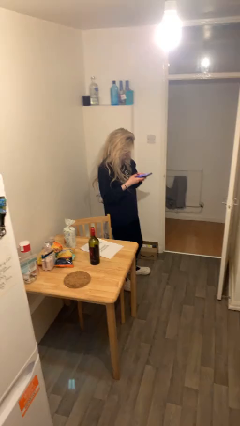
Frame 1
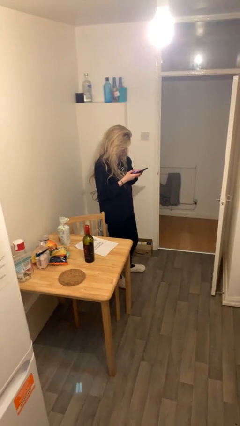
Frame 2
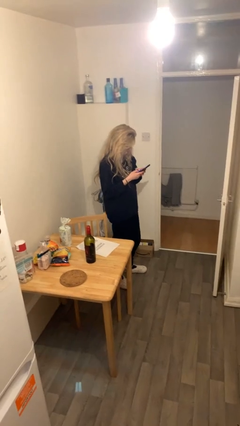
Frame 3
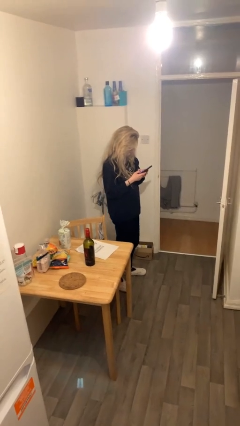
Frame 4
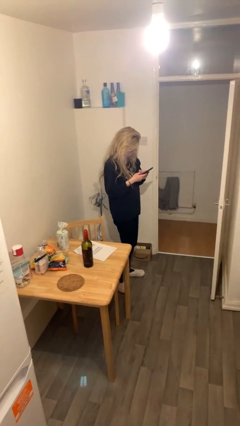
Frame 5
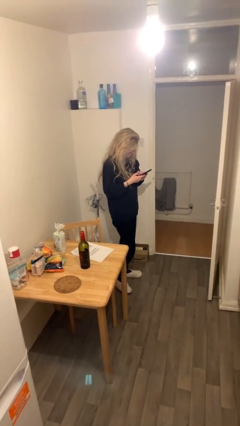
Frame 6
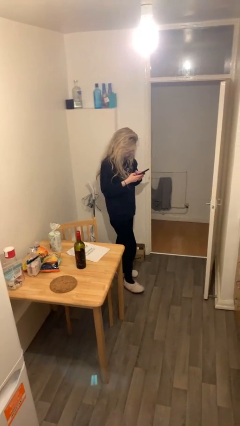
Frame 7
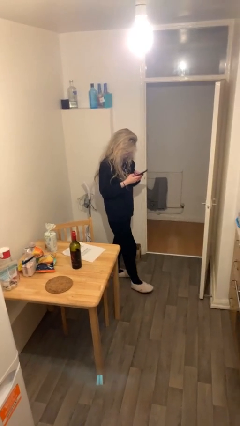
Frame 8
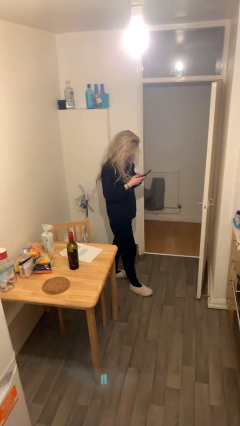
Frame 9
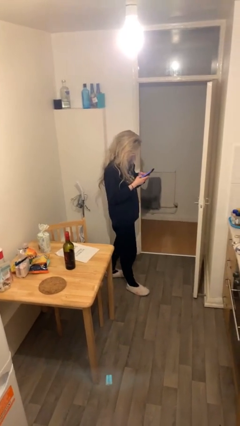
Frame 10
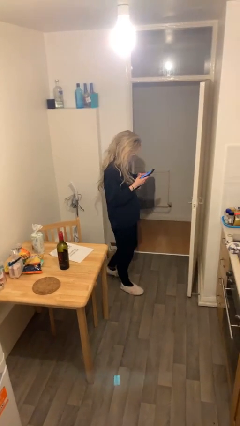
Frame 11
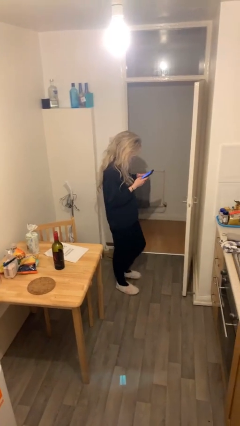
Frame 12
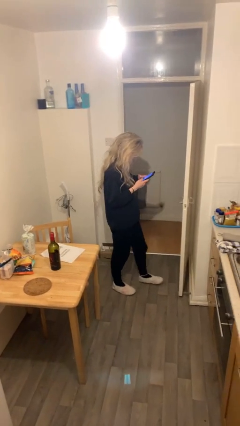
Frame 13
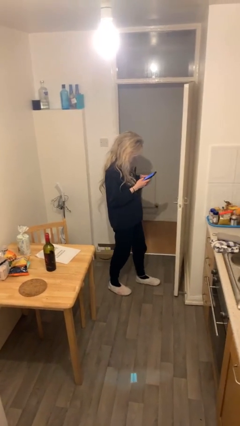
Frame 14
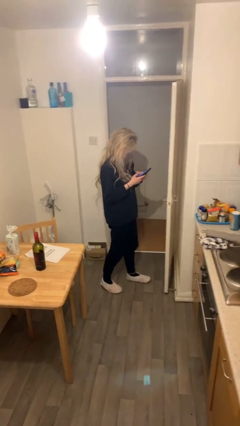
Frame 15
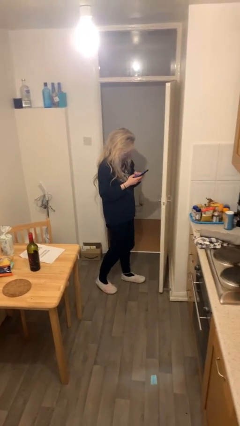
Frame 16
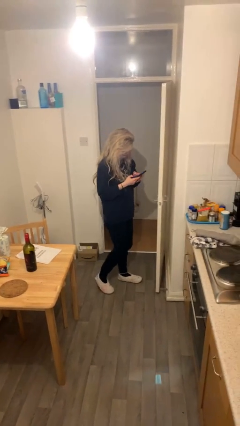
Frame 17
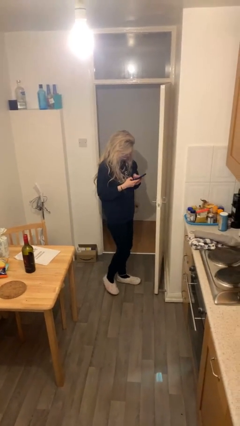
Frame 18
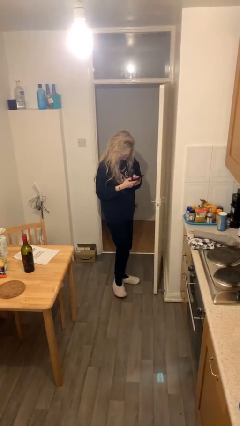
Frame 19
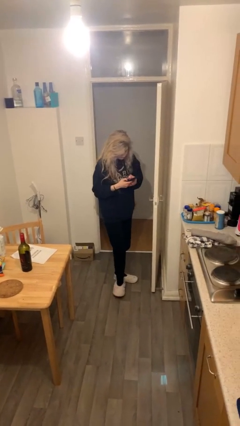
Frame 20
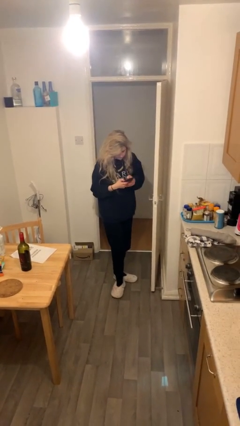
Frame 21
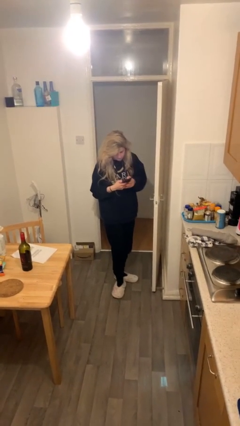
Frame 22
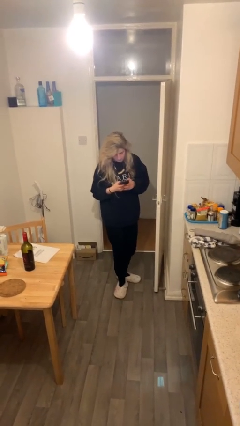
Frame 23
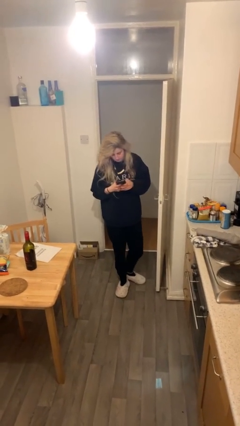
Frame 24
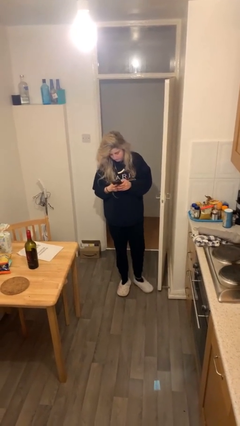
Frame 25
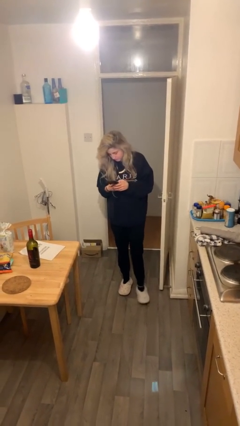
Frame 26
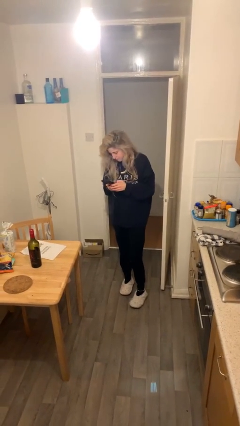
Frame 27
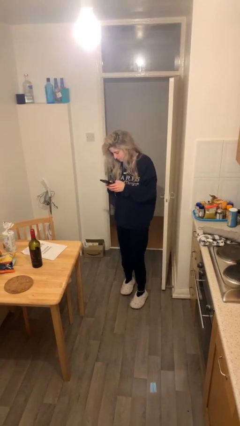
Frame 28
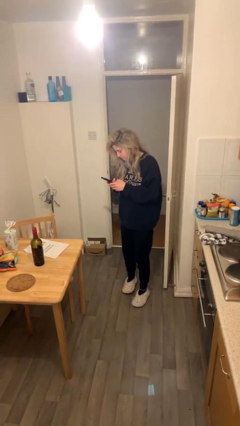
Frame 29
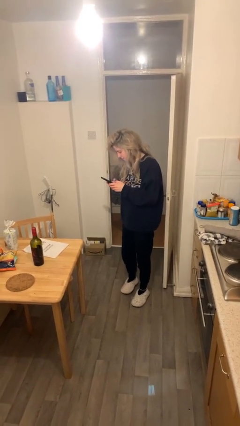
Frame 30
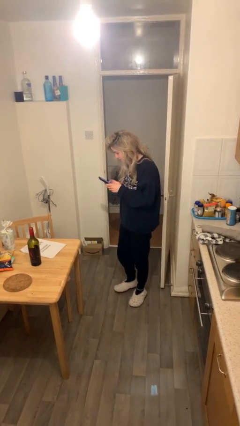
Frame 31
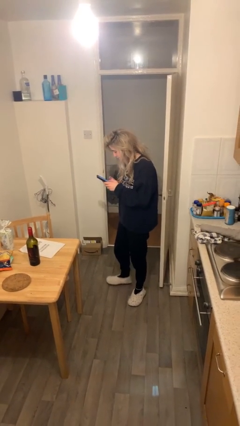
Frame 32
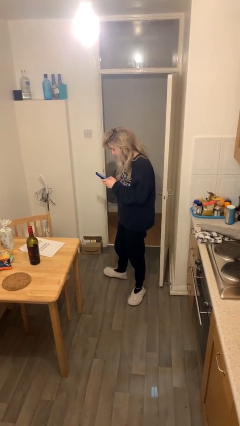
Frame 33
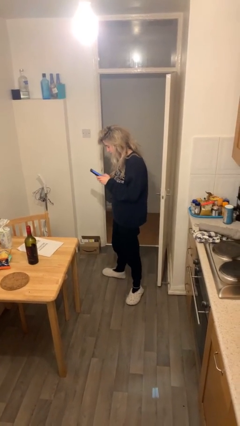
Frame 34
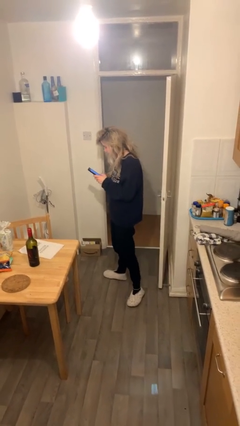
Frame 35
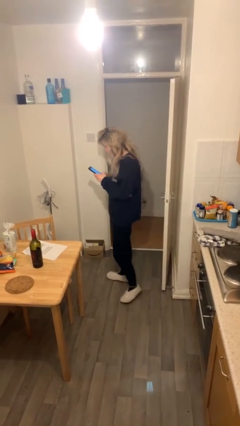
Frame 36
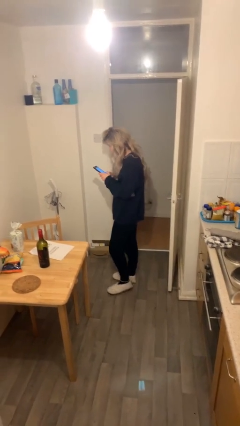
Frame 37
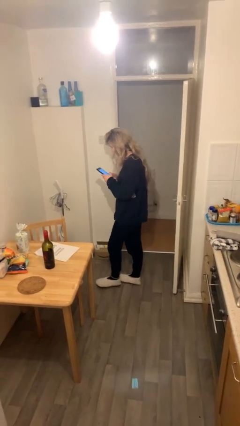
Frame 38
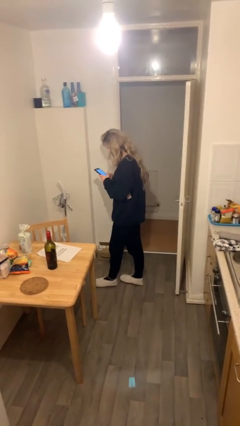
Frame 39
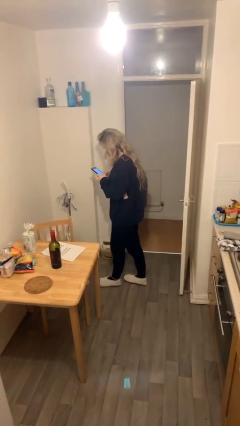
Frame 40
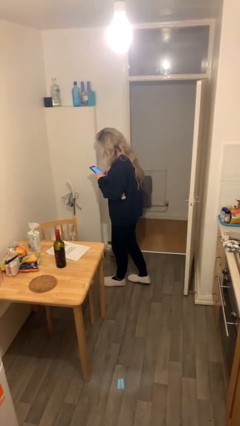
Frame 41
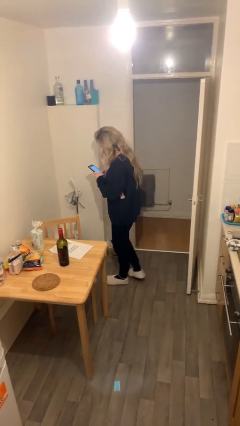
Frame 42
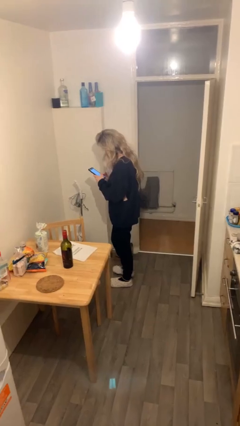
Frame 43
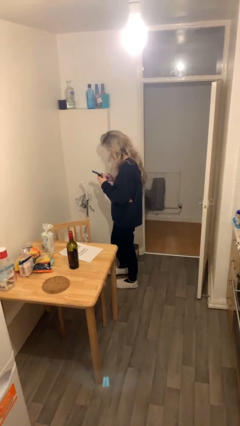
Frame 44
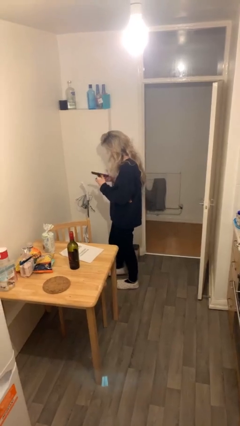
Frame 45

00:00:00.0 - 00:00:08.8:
person texts on phone

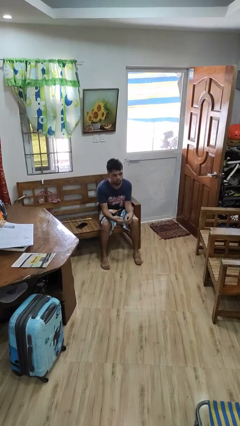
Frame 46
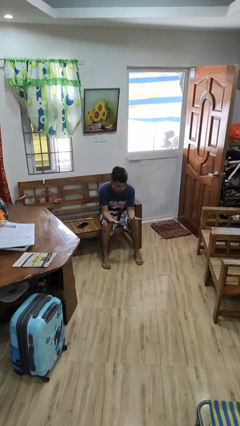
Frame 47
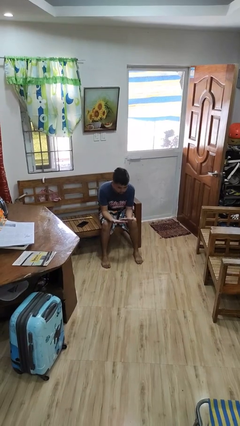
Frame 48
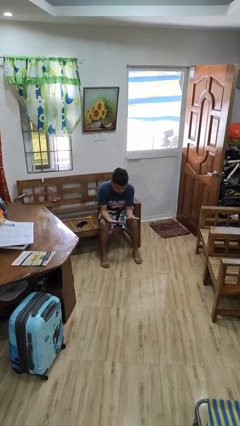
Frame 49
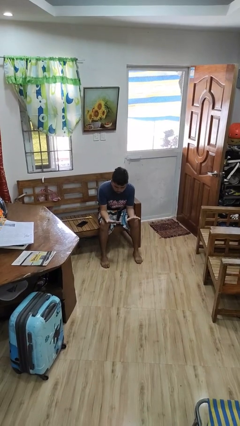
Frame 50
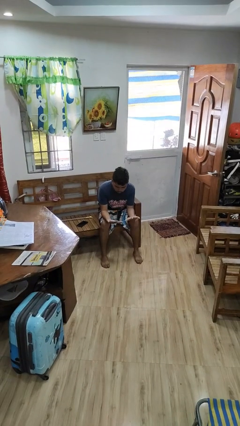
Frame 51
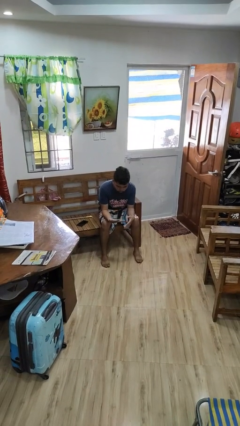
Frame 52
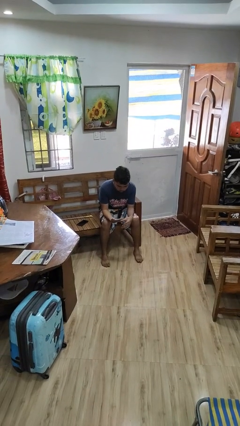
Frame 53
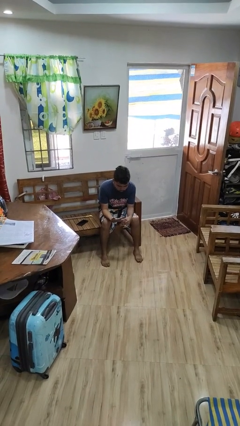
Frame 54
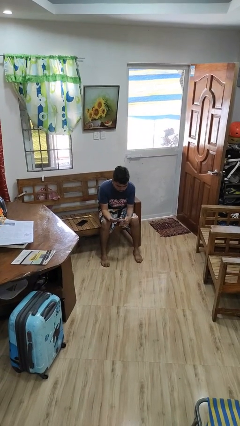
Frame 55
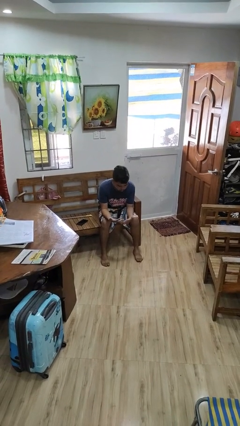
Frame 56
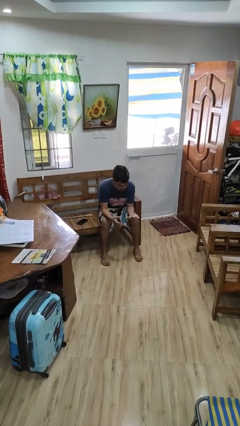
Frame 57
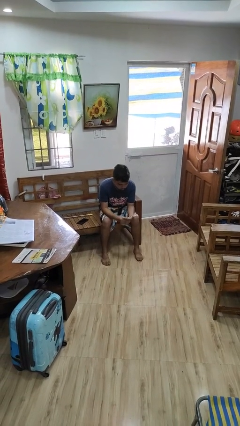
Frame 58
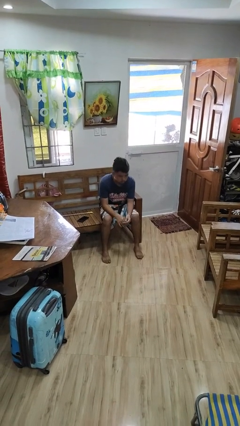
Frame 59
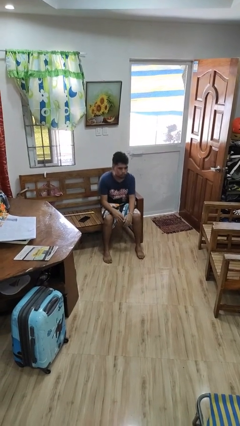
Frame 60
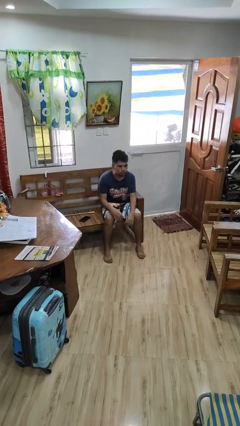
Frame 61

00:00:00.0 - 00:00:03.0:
person looks at hands in lap

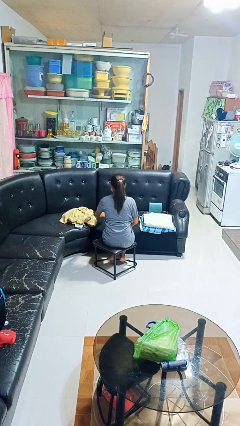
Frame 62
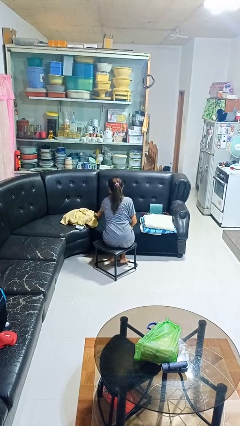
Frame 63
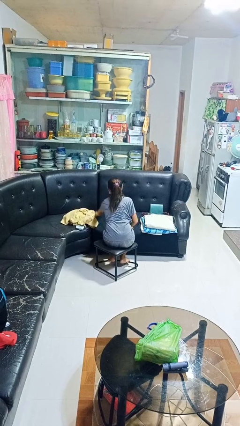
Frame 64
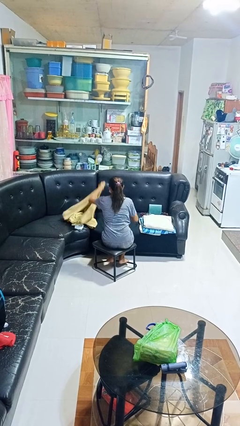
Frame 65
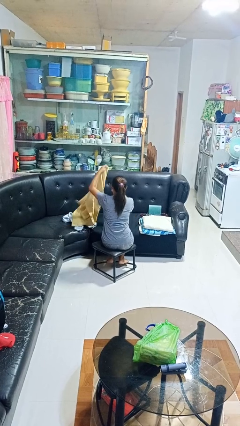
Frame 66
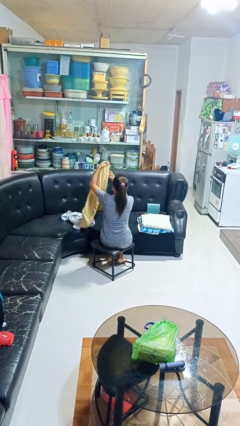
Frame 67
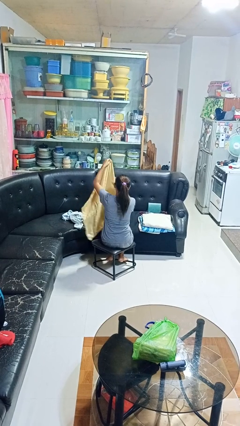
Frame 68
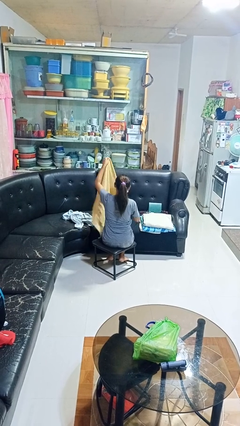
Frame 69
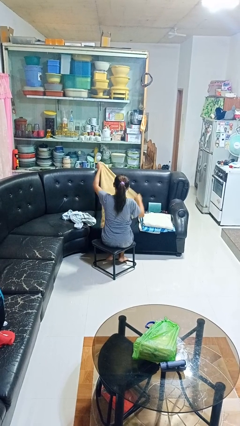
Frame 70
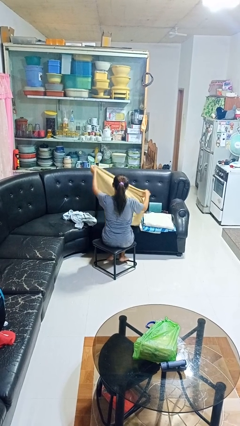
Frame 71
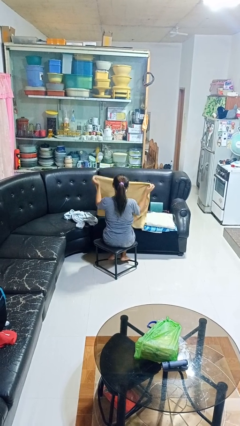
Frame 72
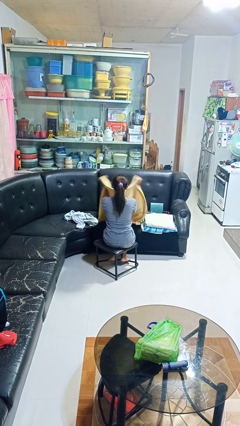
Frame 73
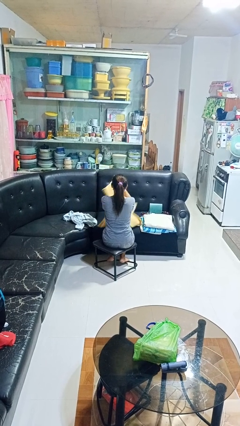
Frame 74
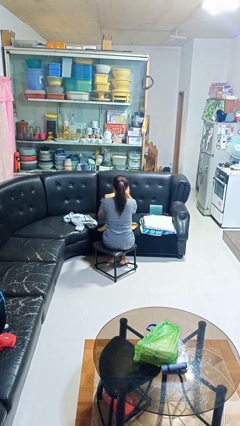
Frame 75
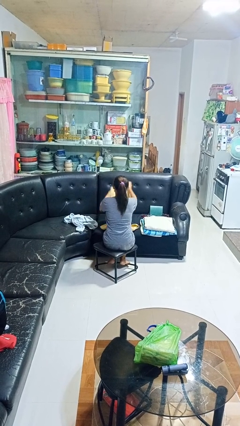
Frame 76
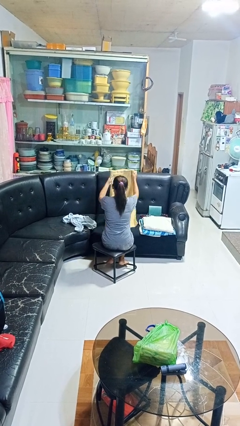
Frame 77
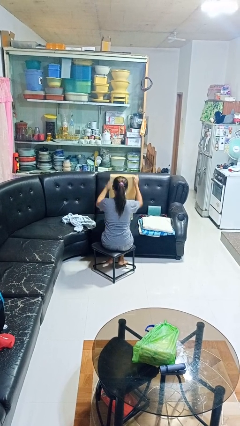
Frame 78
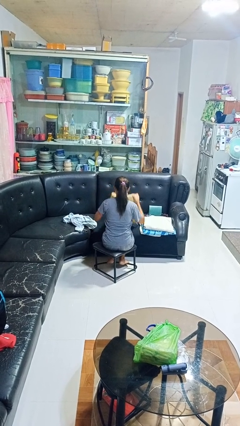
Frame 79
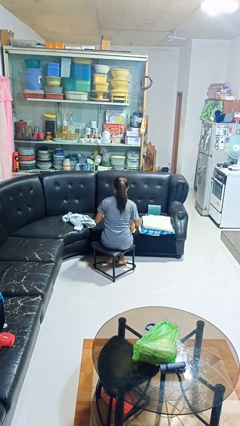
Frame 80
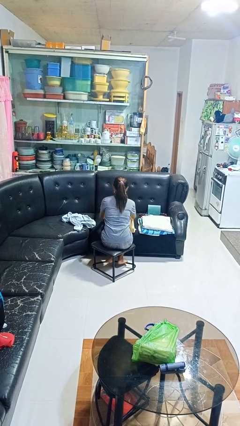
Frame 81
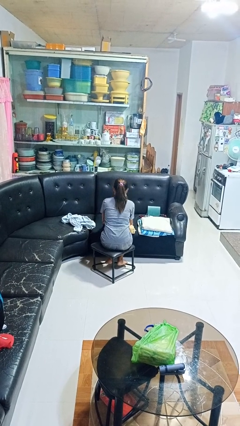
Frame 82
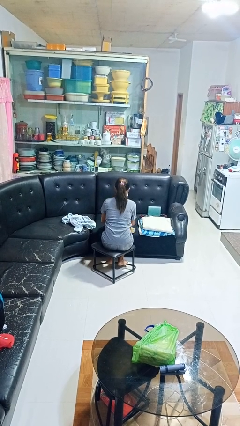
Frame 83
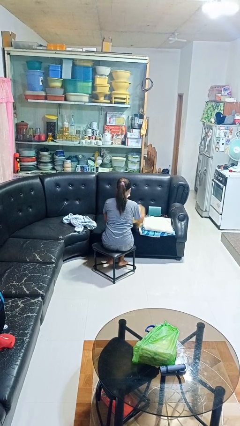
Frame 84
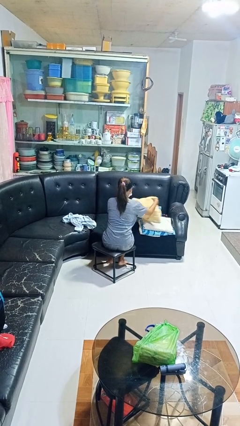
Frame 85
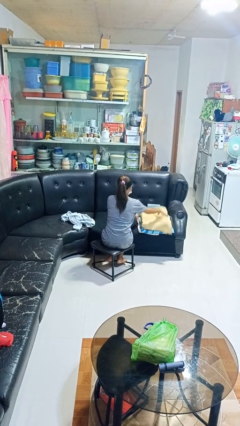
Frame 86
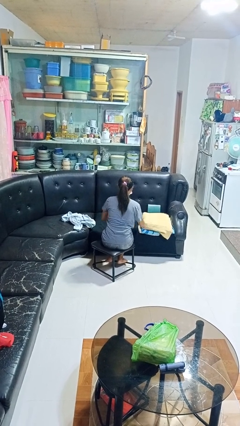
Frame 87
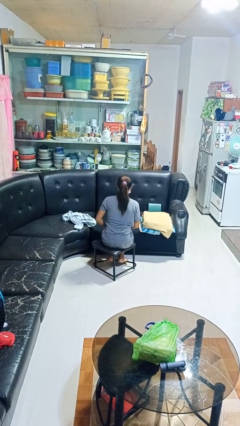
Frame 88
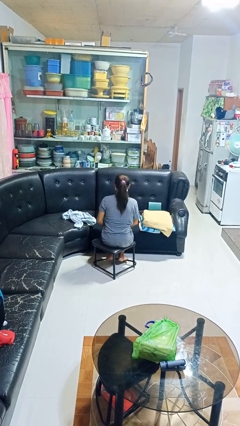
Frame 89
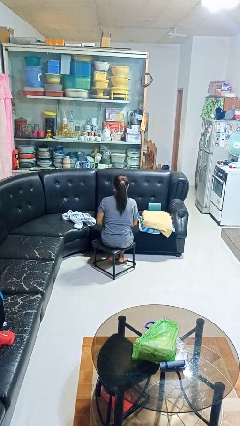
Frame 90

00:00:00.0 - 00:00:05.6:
person folds towel

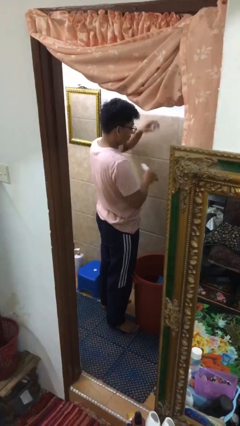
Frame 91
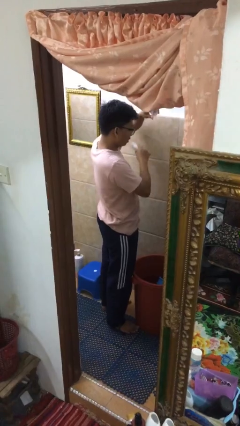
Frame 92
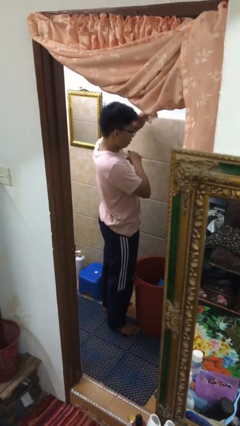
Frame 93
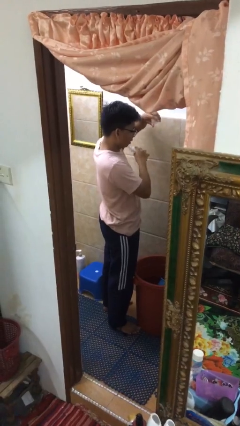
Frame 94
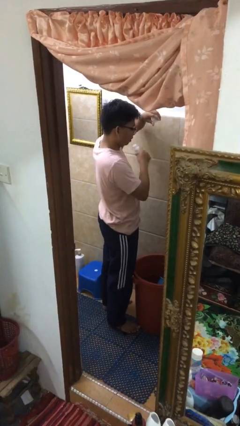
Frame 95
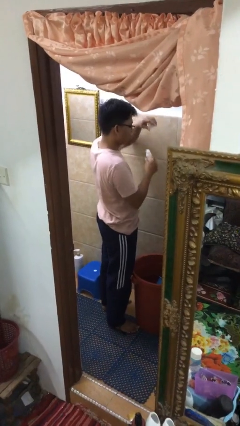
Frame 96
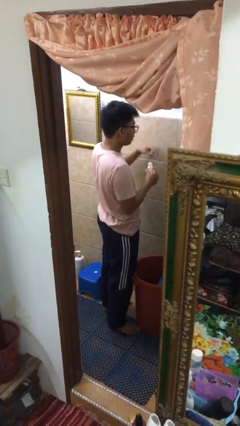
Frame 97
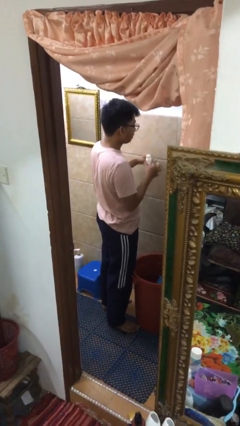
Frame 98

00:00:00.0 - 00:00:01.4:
person applies deodorant
